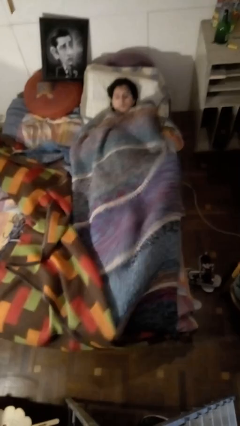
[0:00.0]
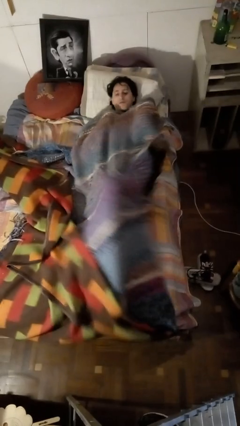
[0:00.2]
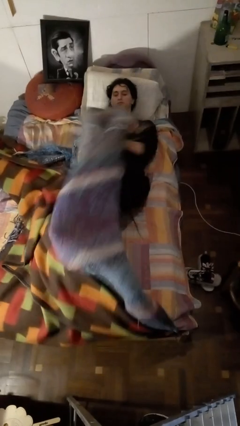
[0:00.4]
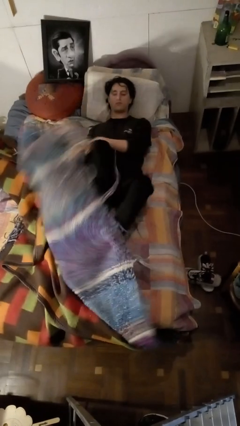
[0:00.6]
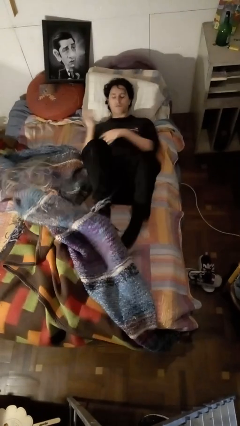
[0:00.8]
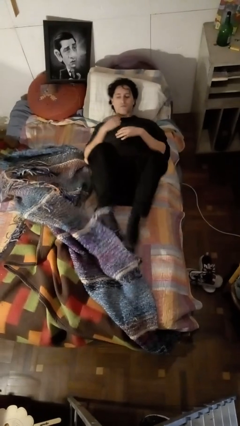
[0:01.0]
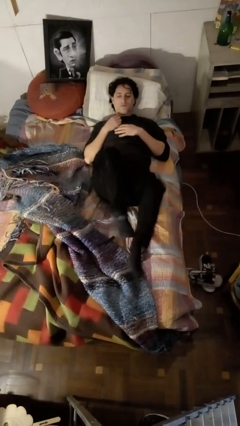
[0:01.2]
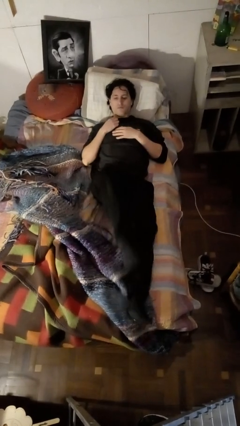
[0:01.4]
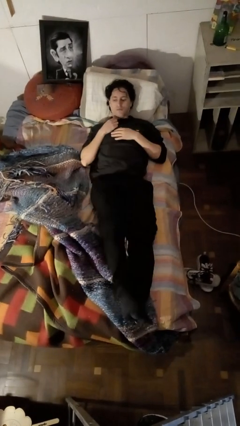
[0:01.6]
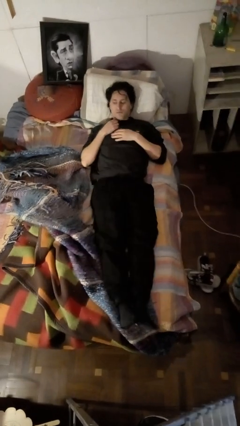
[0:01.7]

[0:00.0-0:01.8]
person uncovers with bedsheets

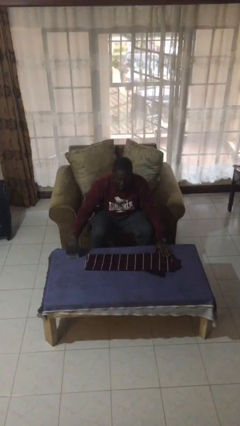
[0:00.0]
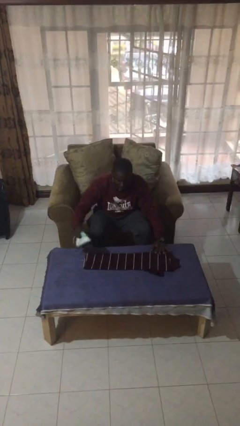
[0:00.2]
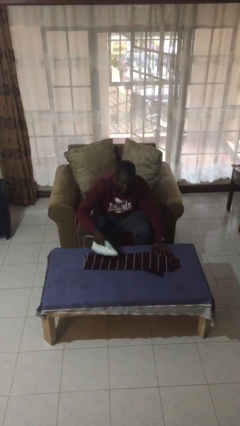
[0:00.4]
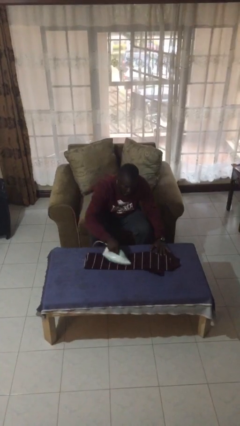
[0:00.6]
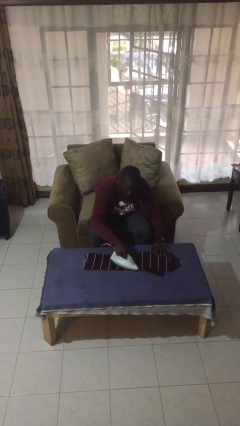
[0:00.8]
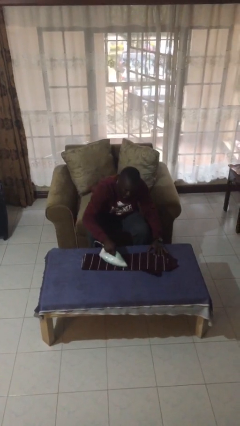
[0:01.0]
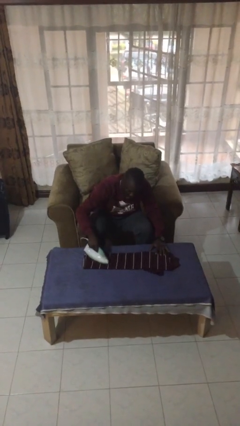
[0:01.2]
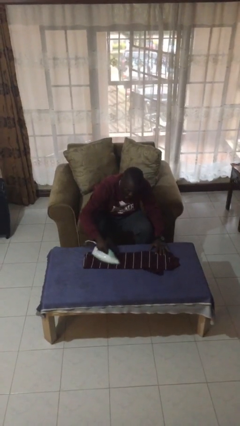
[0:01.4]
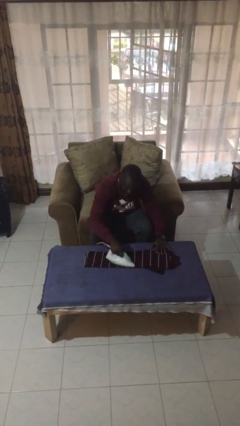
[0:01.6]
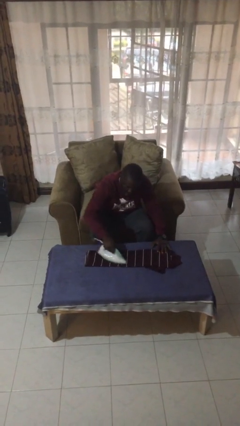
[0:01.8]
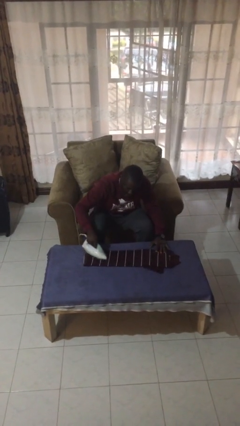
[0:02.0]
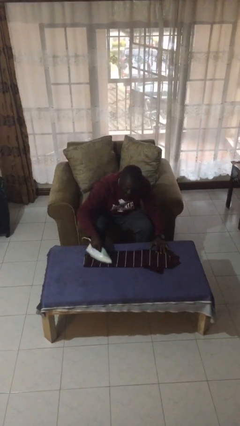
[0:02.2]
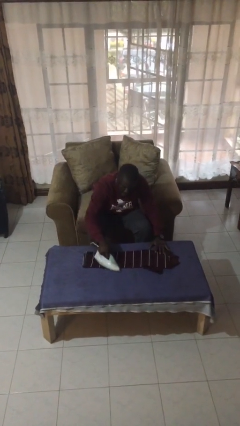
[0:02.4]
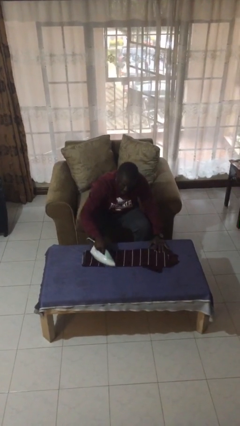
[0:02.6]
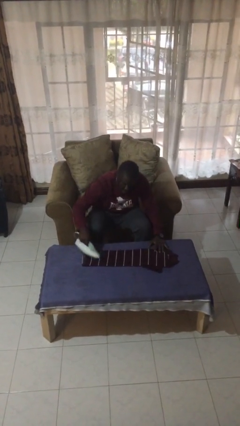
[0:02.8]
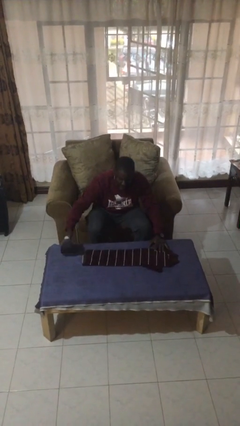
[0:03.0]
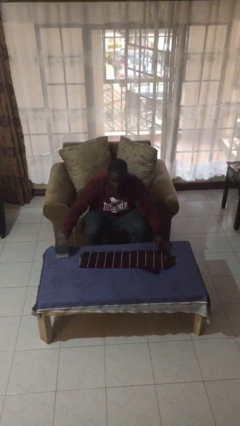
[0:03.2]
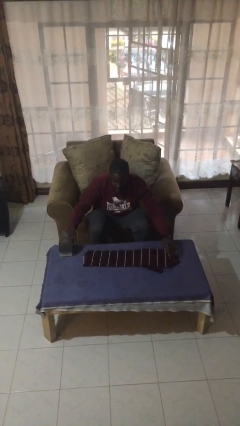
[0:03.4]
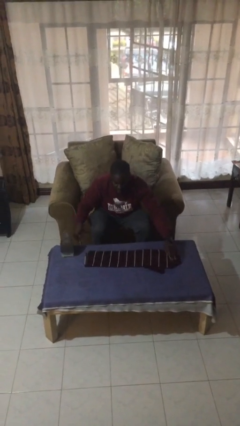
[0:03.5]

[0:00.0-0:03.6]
person irons clothes

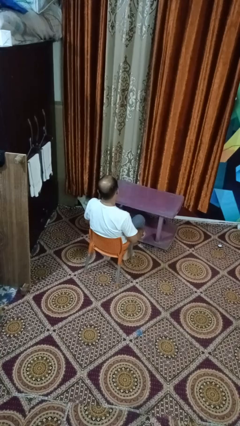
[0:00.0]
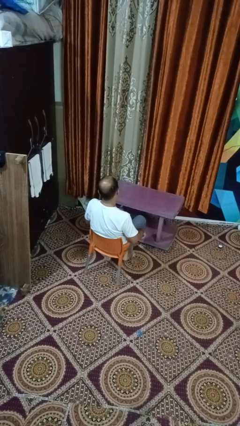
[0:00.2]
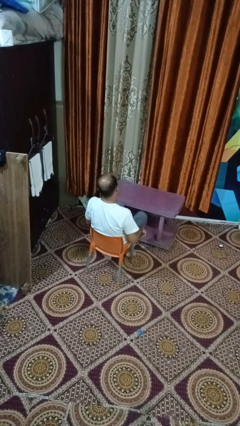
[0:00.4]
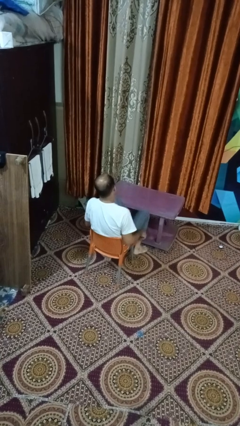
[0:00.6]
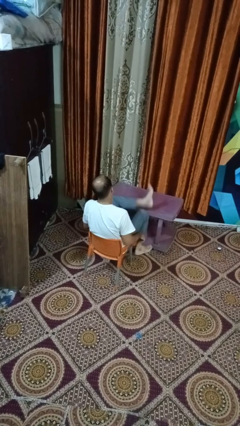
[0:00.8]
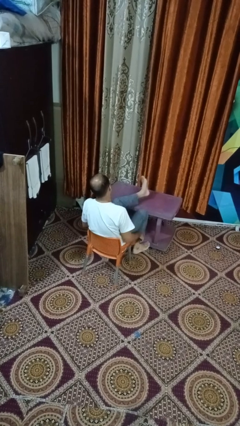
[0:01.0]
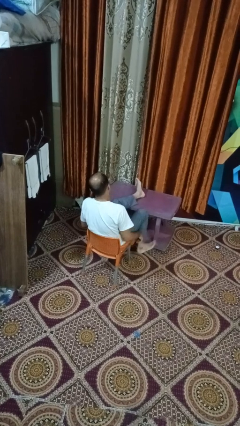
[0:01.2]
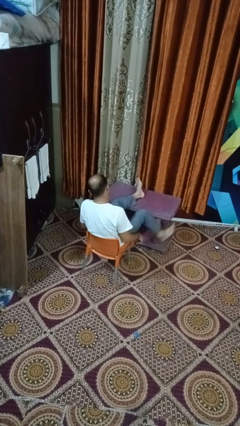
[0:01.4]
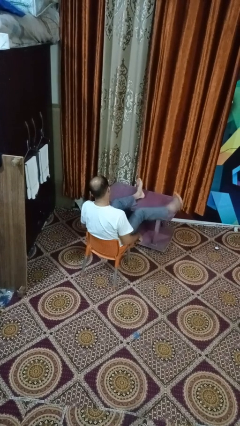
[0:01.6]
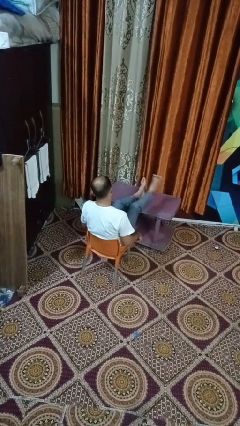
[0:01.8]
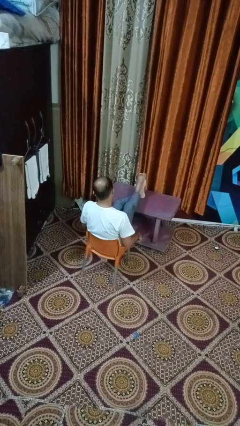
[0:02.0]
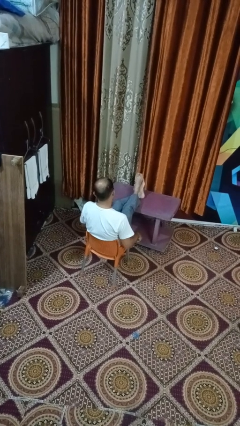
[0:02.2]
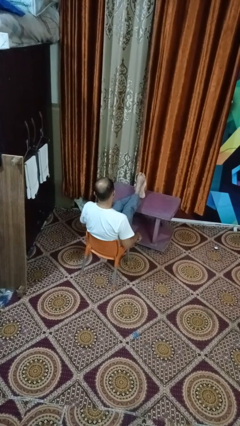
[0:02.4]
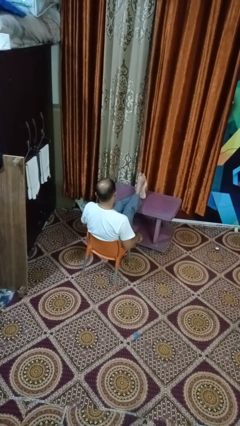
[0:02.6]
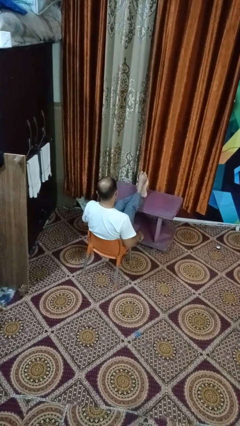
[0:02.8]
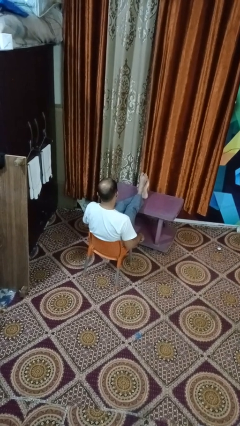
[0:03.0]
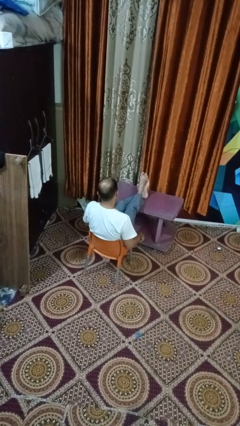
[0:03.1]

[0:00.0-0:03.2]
person puts feet up

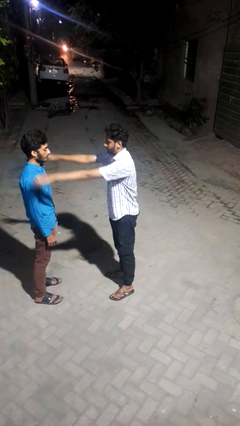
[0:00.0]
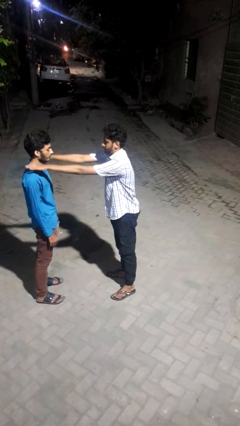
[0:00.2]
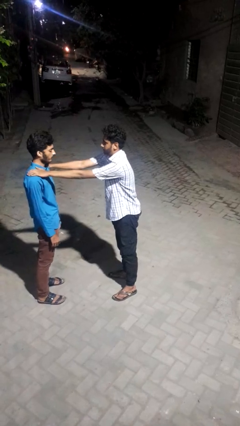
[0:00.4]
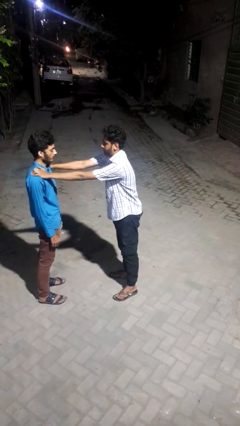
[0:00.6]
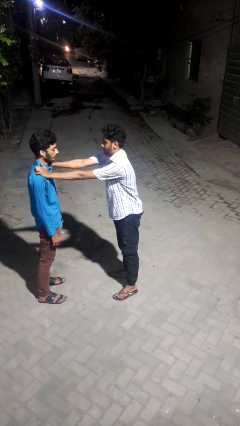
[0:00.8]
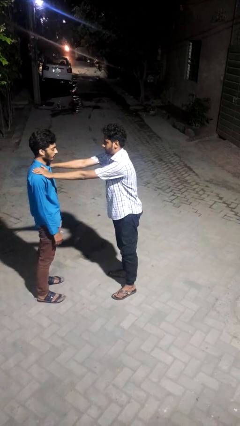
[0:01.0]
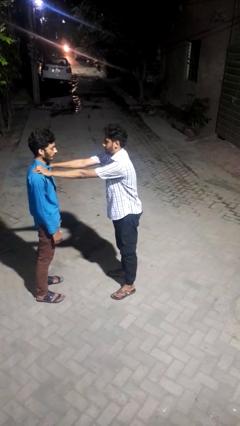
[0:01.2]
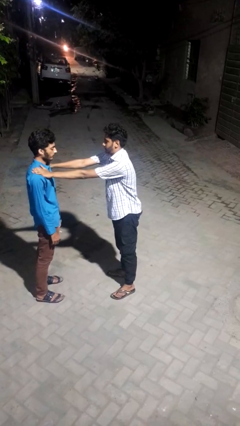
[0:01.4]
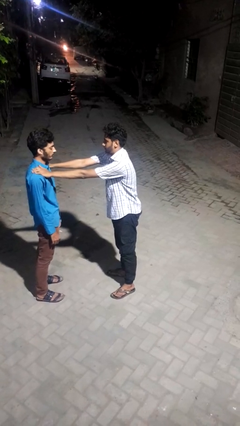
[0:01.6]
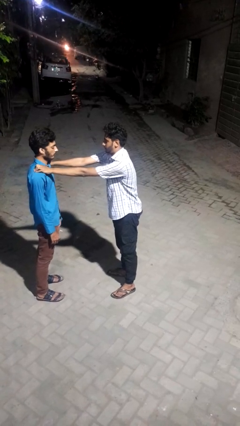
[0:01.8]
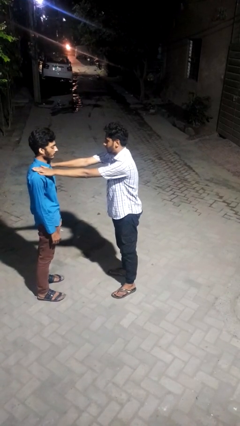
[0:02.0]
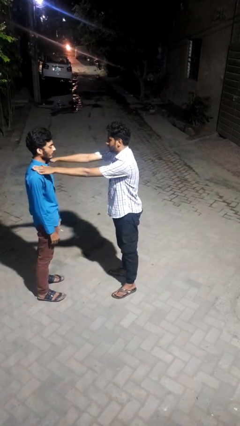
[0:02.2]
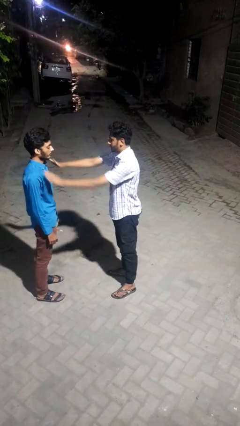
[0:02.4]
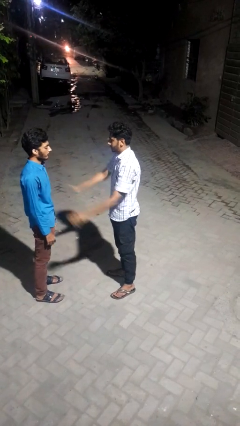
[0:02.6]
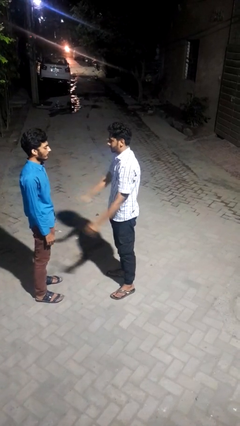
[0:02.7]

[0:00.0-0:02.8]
person pounds shoulders of person

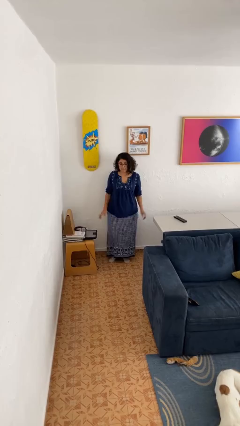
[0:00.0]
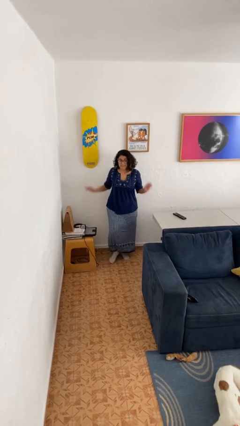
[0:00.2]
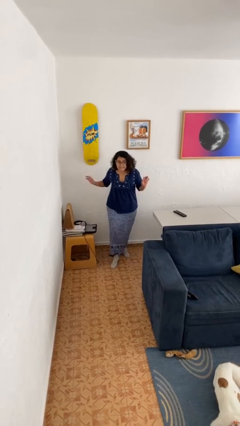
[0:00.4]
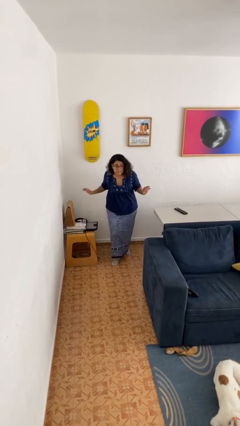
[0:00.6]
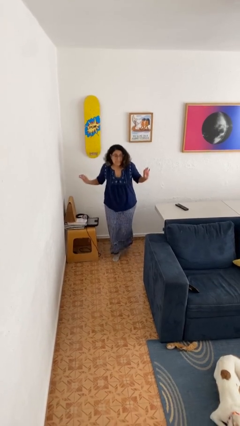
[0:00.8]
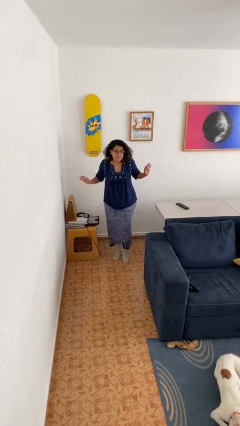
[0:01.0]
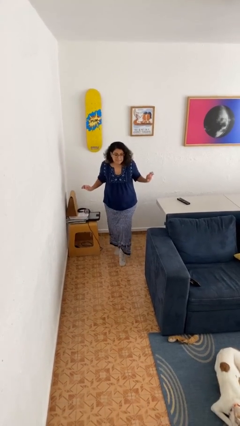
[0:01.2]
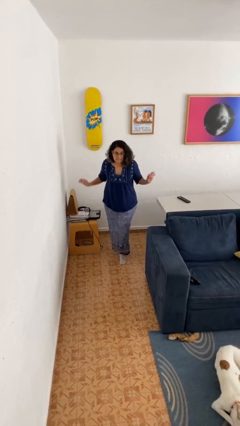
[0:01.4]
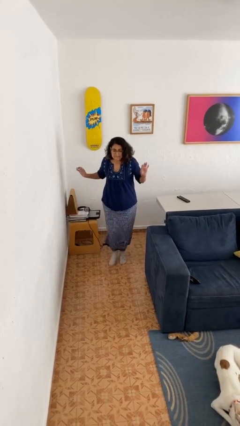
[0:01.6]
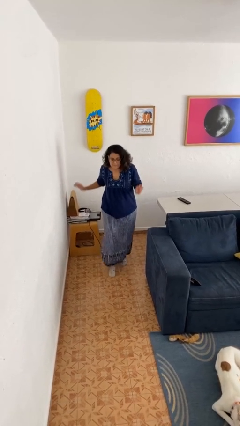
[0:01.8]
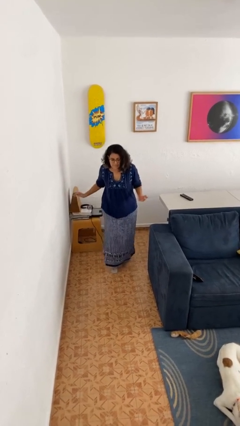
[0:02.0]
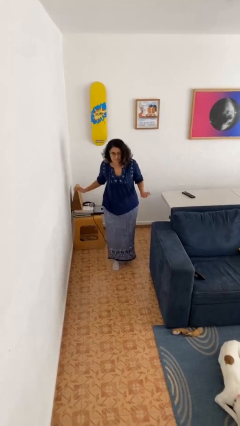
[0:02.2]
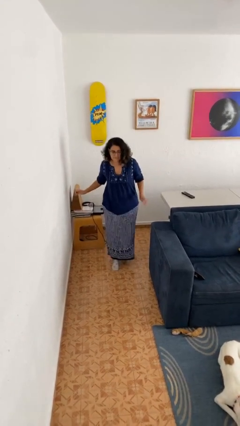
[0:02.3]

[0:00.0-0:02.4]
person walks tiptoe

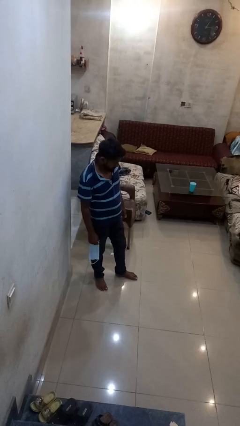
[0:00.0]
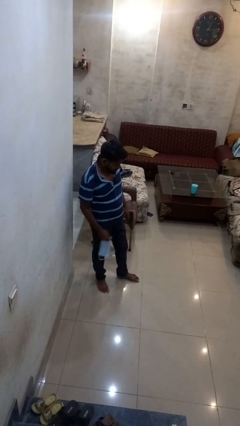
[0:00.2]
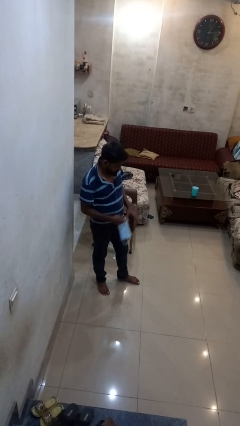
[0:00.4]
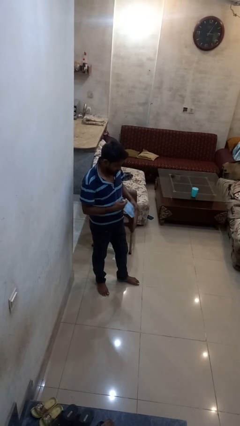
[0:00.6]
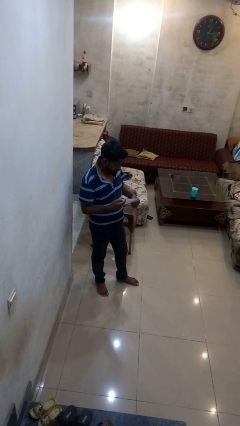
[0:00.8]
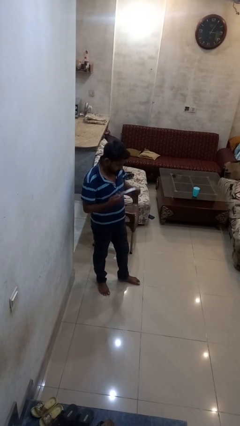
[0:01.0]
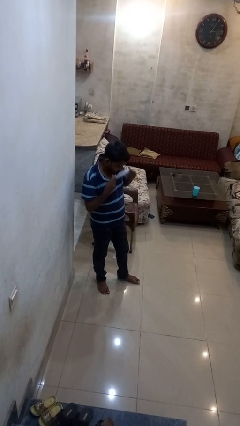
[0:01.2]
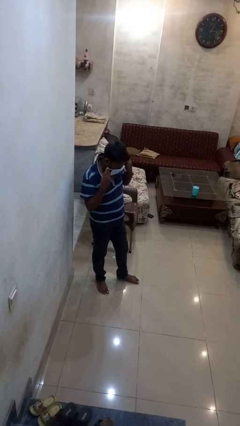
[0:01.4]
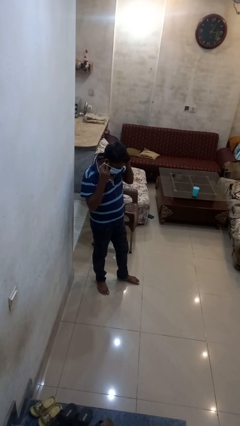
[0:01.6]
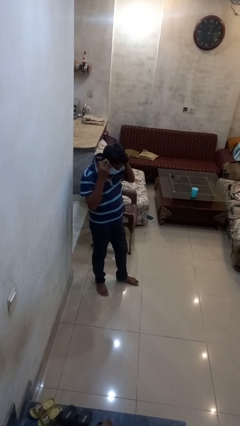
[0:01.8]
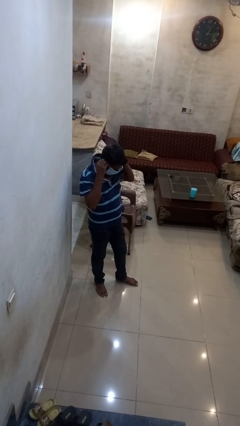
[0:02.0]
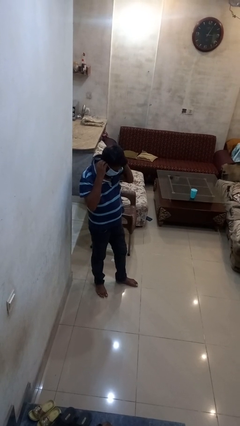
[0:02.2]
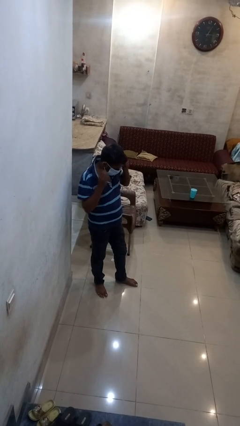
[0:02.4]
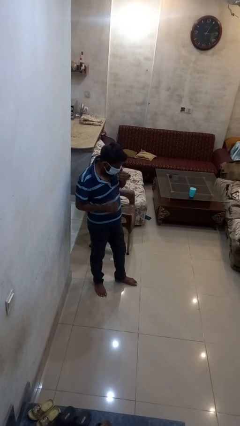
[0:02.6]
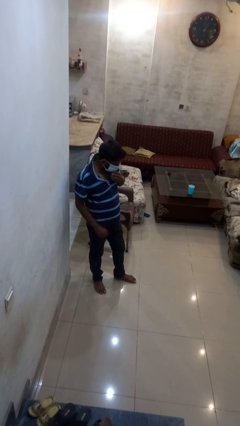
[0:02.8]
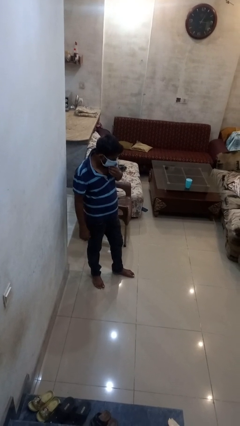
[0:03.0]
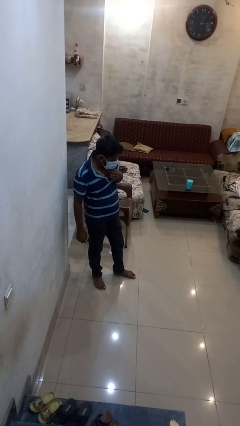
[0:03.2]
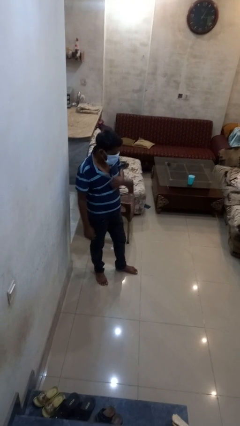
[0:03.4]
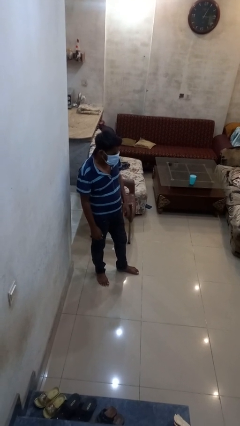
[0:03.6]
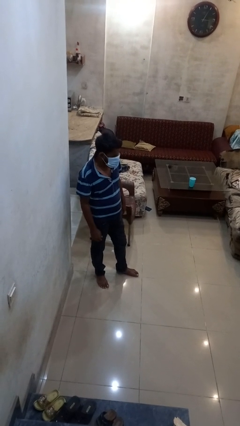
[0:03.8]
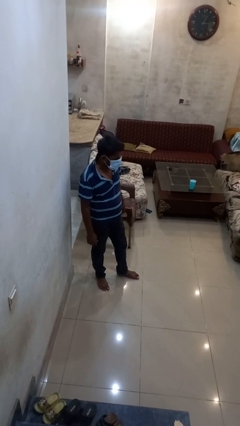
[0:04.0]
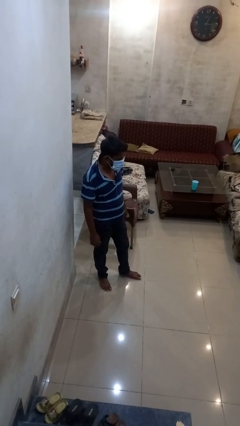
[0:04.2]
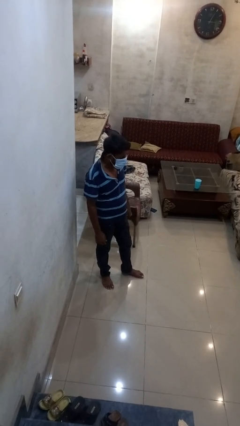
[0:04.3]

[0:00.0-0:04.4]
person puts on facemask
